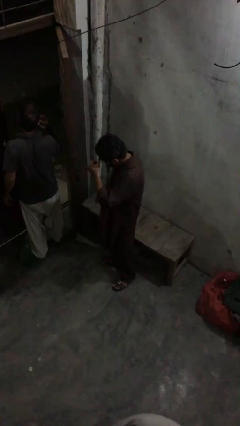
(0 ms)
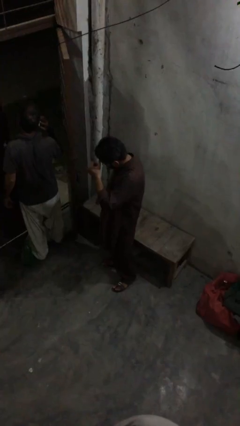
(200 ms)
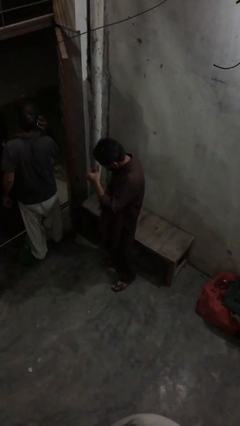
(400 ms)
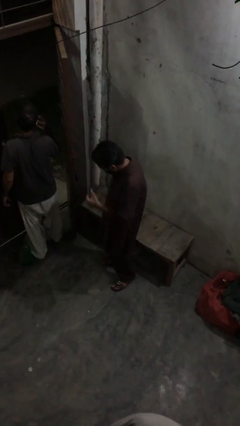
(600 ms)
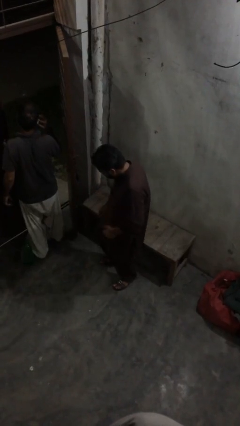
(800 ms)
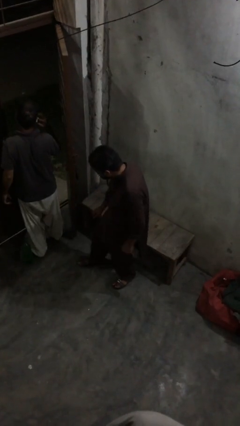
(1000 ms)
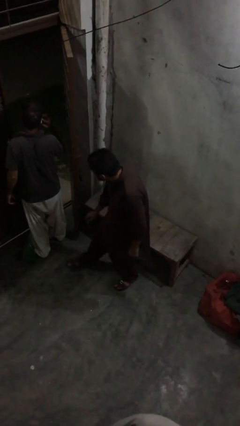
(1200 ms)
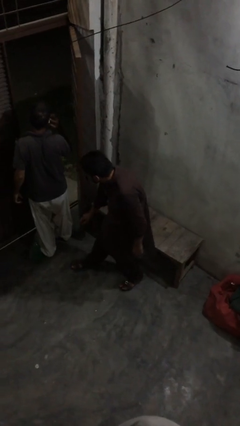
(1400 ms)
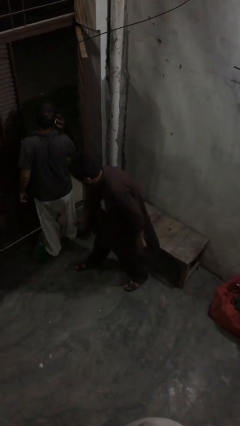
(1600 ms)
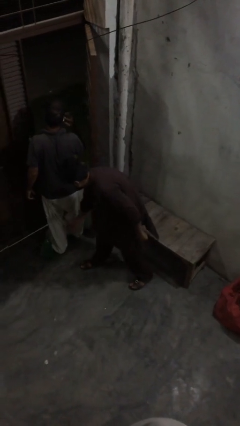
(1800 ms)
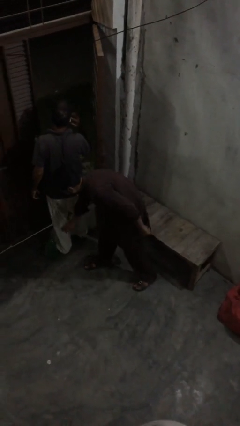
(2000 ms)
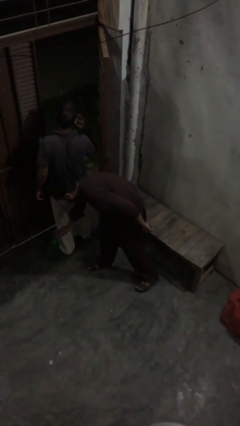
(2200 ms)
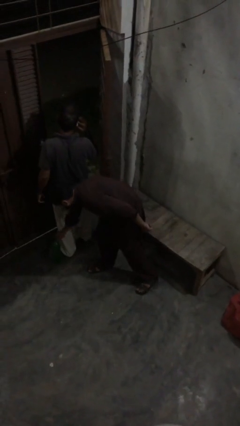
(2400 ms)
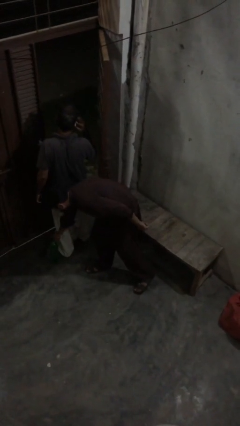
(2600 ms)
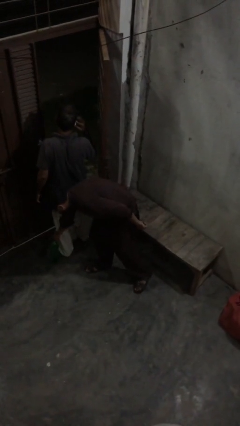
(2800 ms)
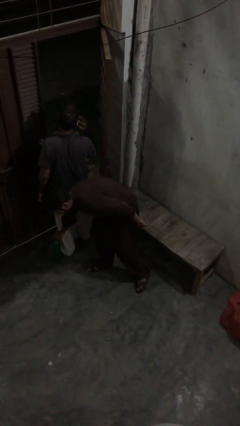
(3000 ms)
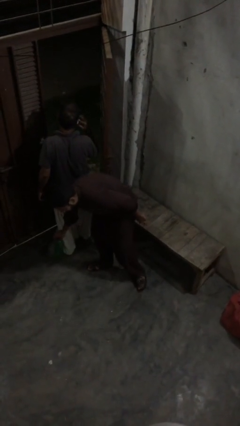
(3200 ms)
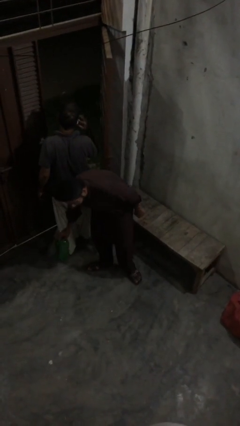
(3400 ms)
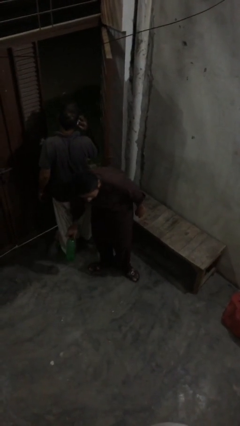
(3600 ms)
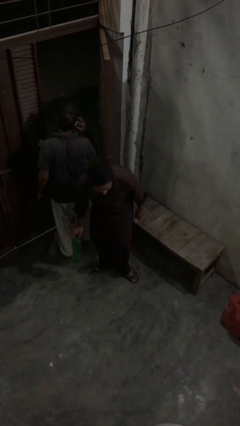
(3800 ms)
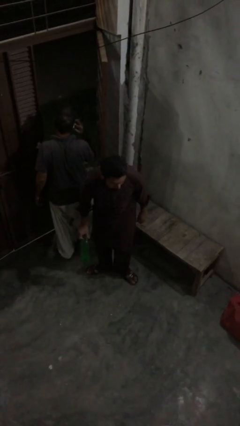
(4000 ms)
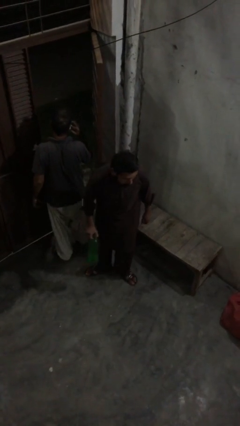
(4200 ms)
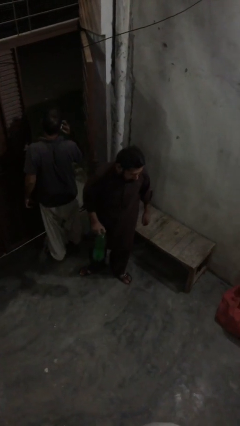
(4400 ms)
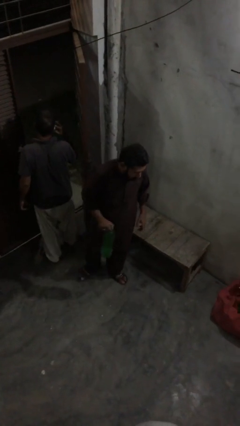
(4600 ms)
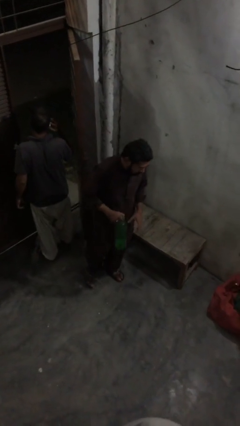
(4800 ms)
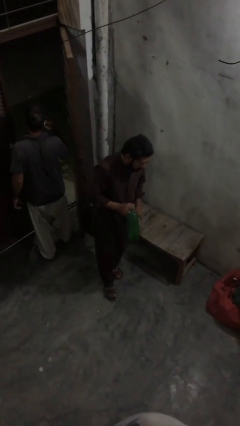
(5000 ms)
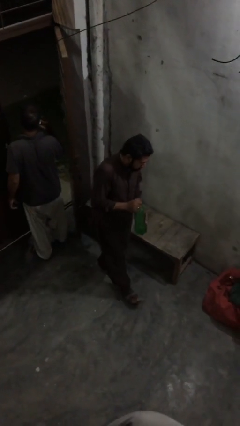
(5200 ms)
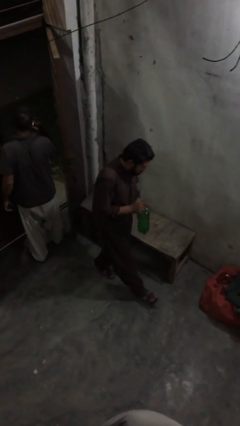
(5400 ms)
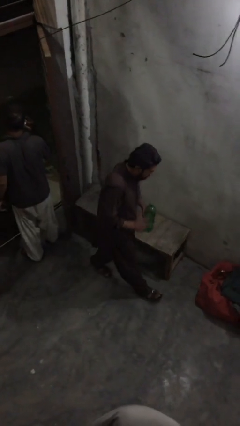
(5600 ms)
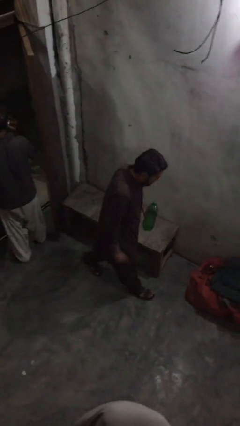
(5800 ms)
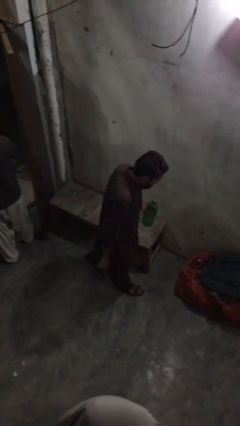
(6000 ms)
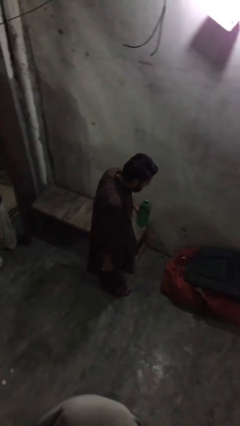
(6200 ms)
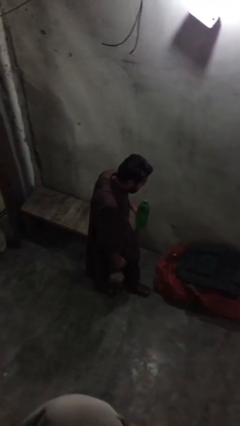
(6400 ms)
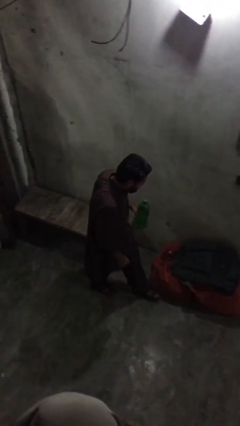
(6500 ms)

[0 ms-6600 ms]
person steals object from person

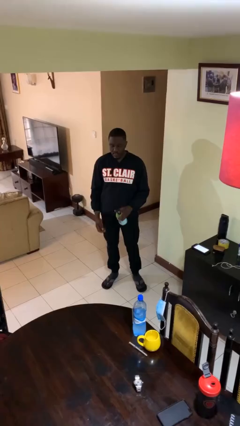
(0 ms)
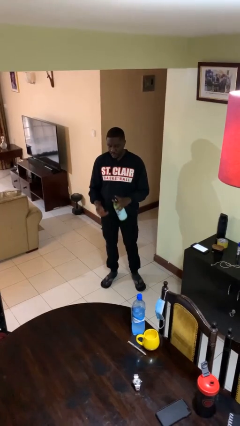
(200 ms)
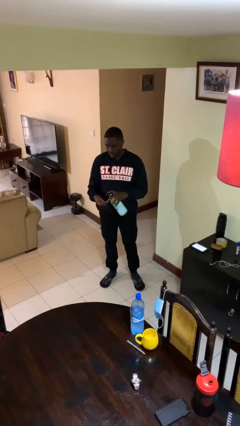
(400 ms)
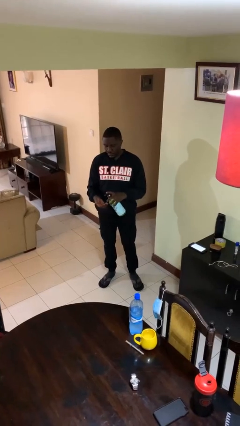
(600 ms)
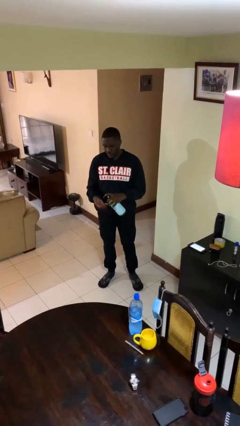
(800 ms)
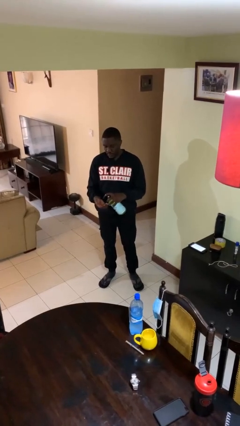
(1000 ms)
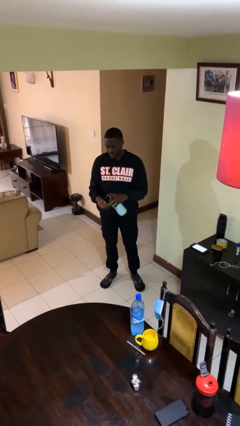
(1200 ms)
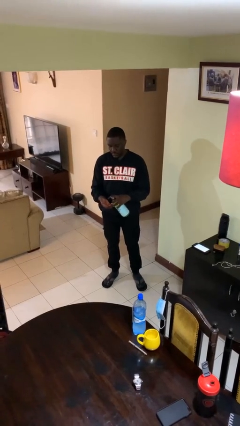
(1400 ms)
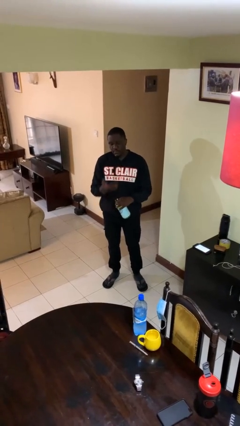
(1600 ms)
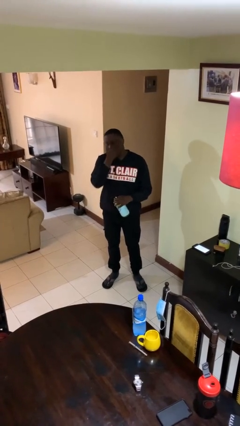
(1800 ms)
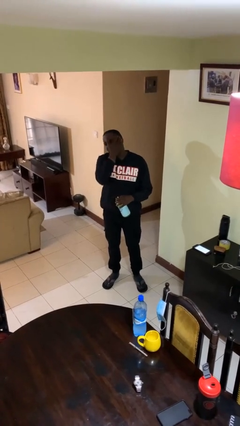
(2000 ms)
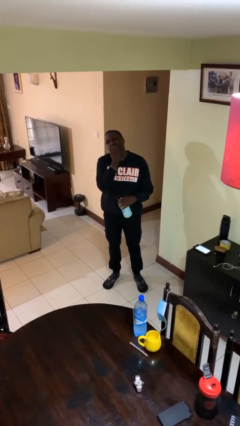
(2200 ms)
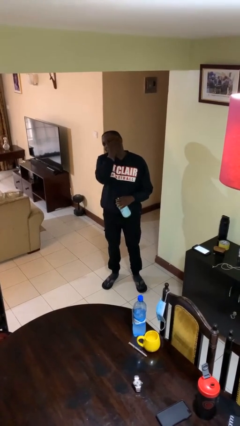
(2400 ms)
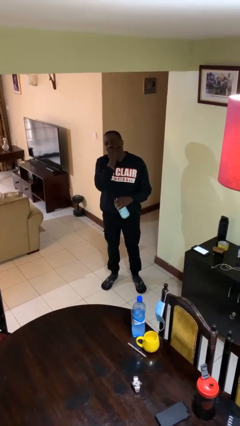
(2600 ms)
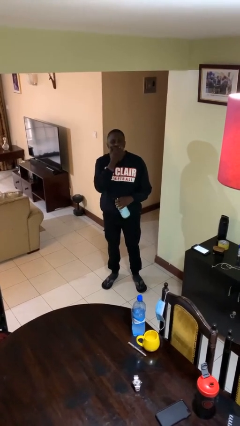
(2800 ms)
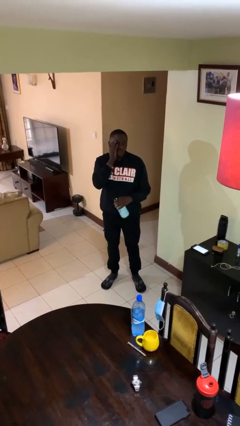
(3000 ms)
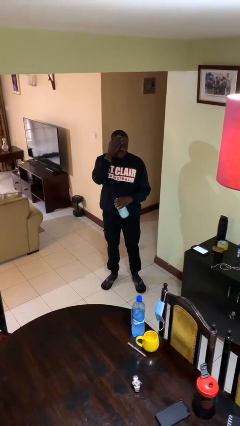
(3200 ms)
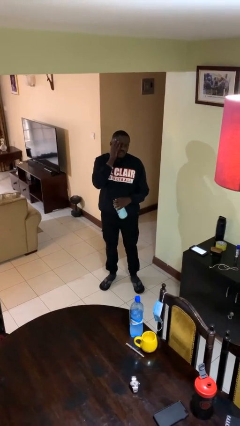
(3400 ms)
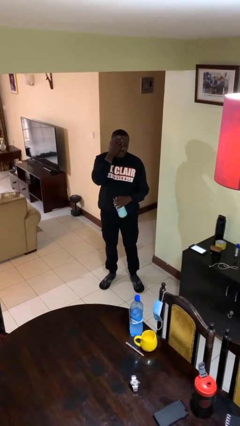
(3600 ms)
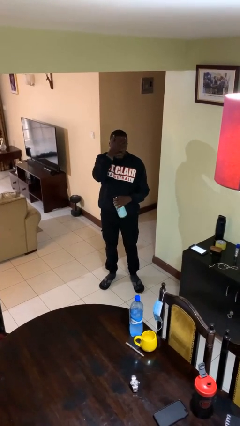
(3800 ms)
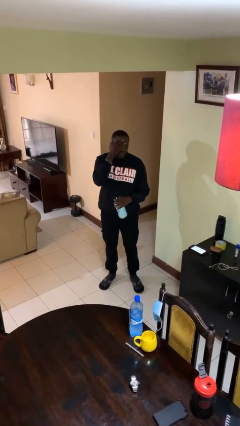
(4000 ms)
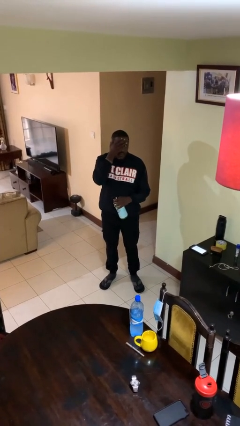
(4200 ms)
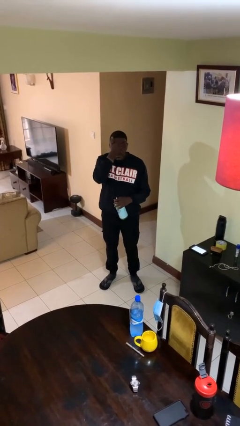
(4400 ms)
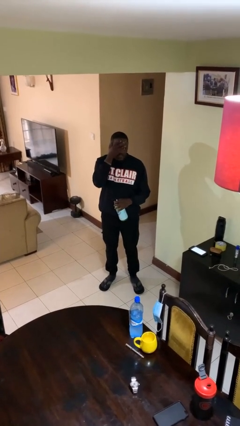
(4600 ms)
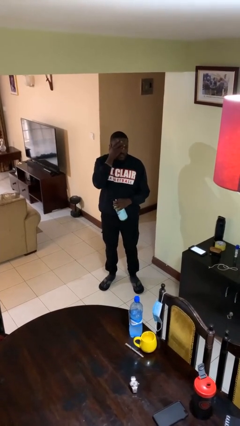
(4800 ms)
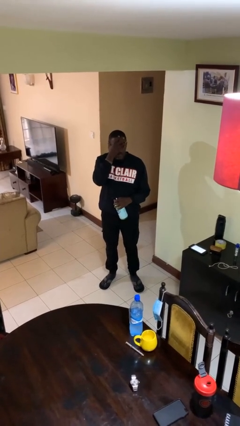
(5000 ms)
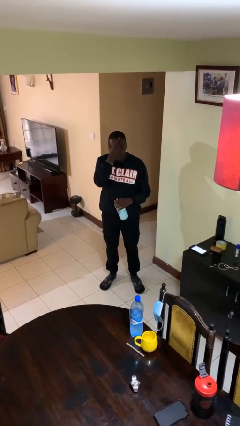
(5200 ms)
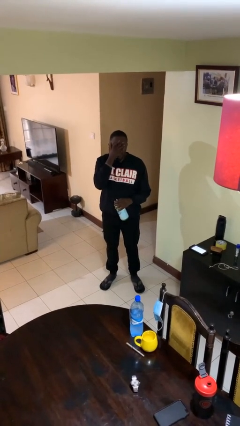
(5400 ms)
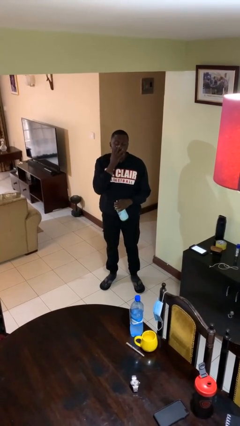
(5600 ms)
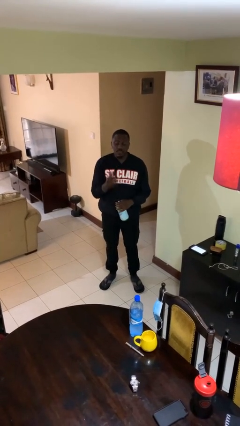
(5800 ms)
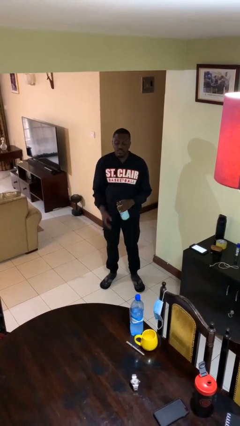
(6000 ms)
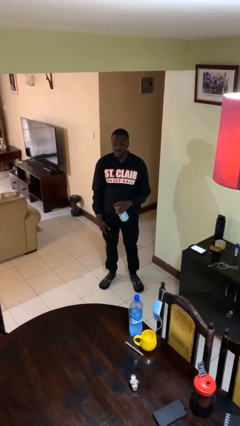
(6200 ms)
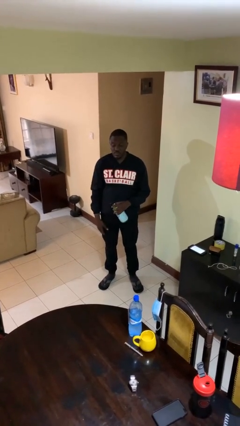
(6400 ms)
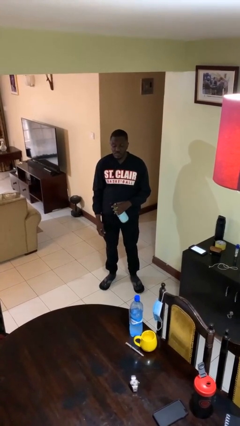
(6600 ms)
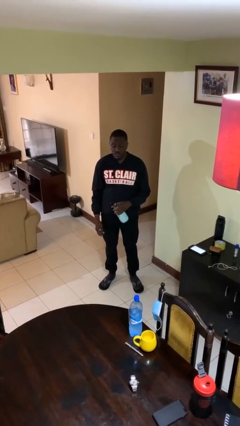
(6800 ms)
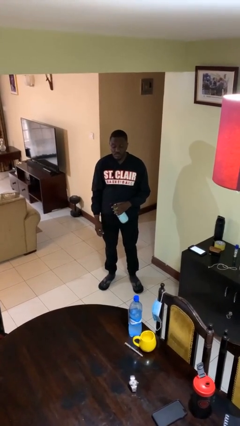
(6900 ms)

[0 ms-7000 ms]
person applies facial moisturizer

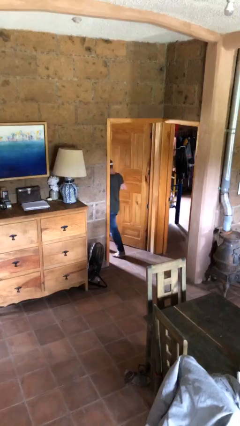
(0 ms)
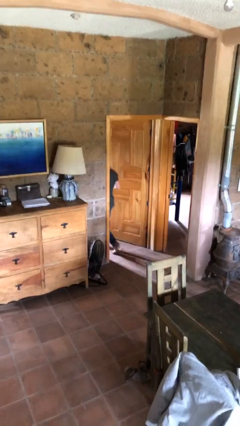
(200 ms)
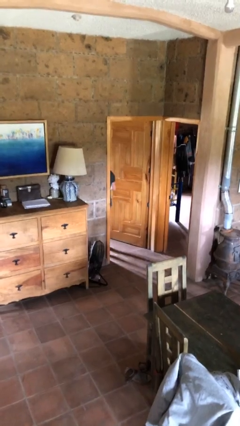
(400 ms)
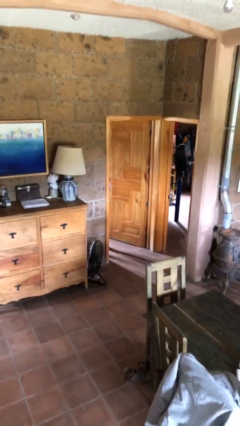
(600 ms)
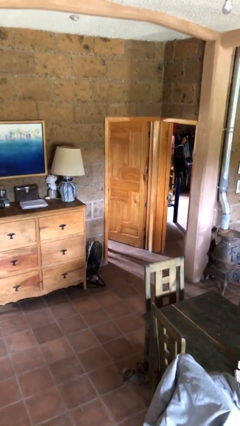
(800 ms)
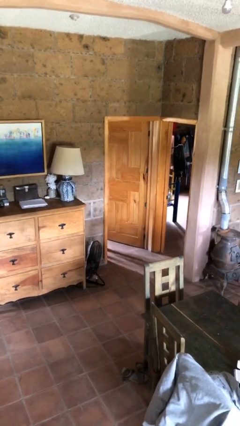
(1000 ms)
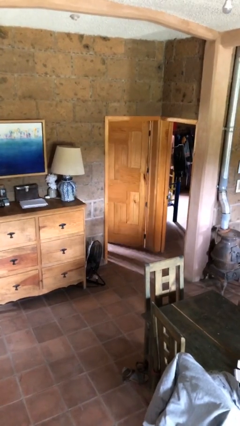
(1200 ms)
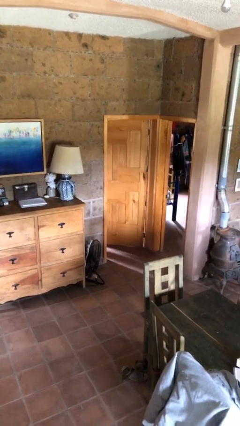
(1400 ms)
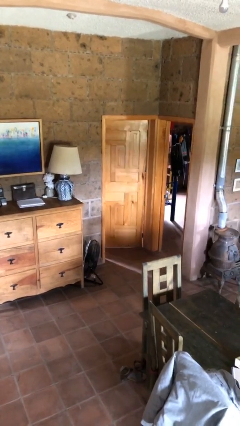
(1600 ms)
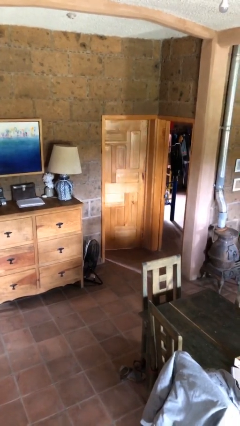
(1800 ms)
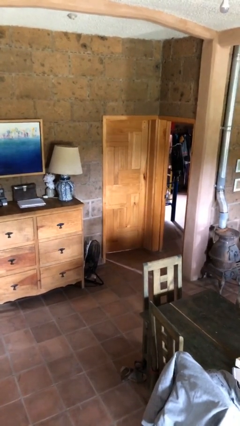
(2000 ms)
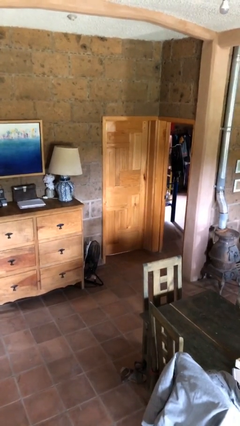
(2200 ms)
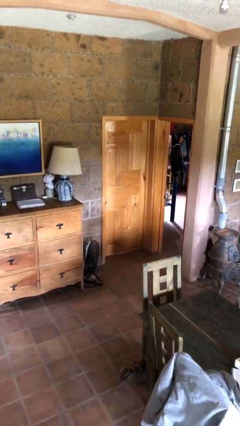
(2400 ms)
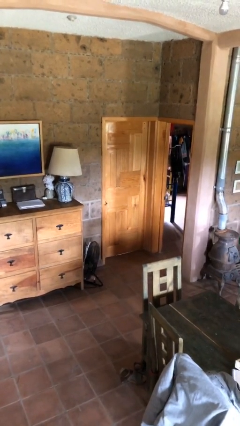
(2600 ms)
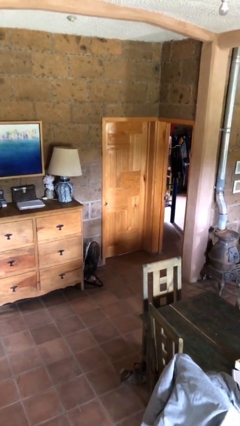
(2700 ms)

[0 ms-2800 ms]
person closes facility door

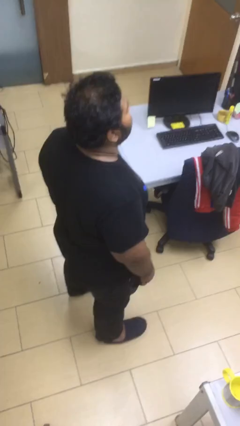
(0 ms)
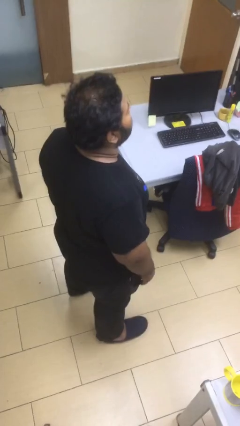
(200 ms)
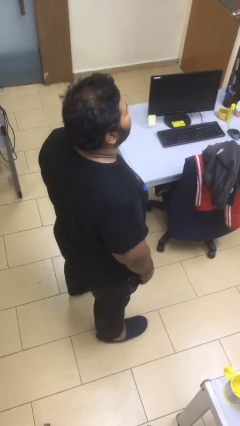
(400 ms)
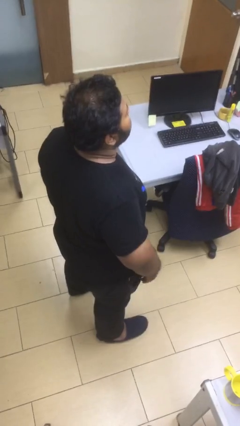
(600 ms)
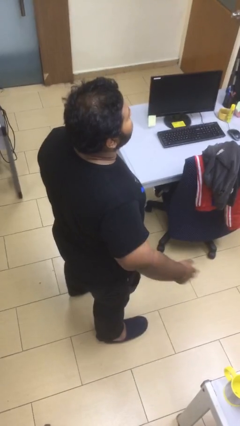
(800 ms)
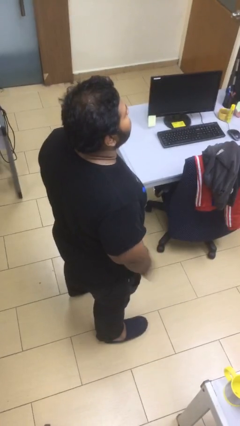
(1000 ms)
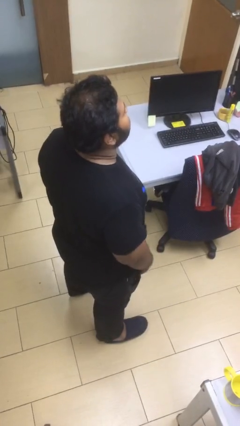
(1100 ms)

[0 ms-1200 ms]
person slaps hands on thighs

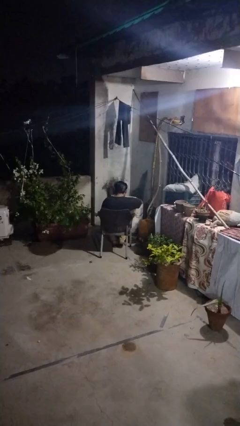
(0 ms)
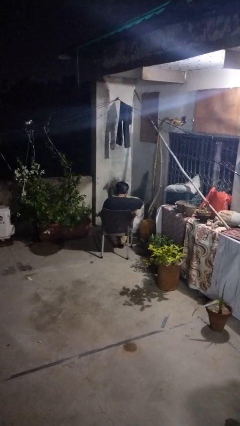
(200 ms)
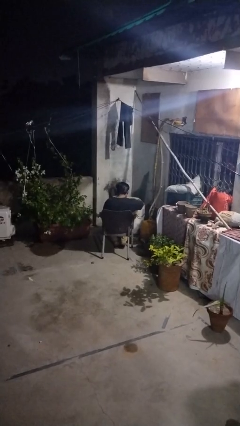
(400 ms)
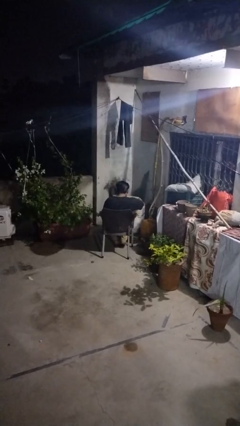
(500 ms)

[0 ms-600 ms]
person searches in box
